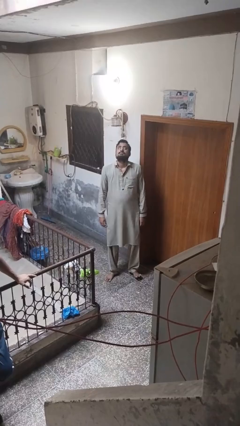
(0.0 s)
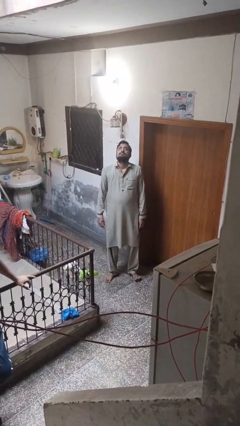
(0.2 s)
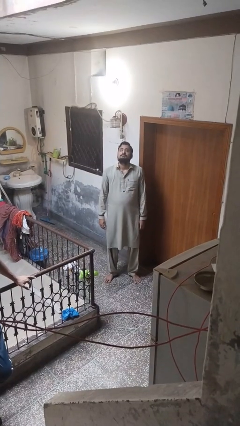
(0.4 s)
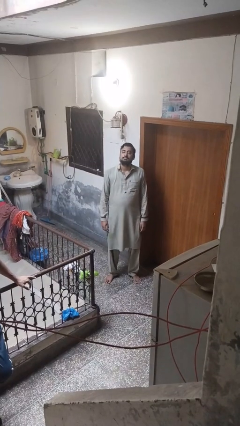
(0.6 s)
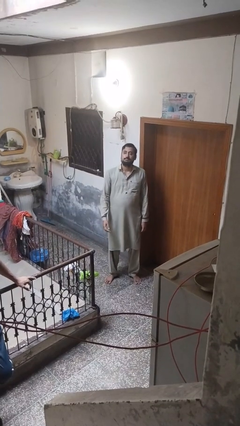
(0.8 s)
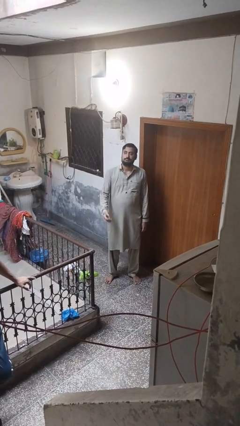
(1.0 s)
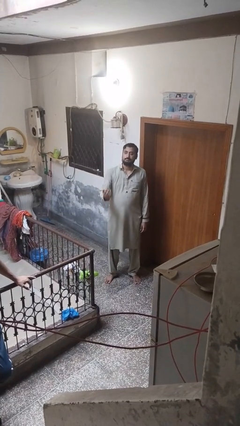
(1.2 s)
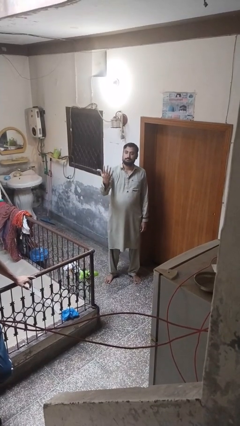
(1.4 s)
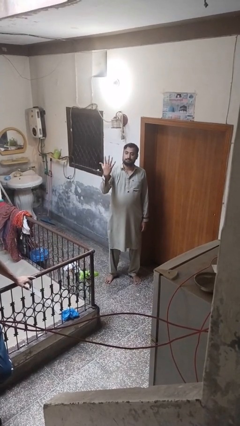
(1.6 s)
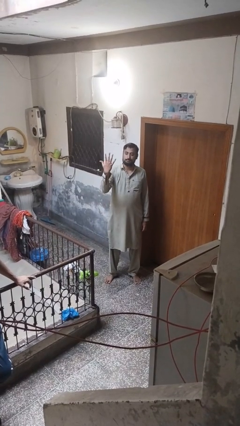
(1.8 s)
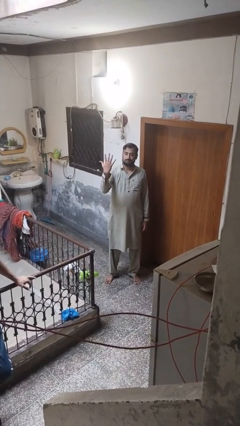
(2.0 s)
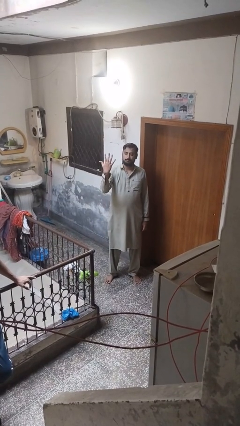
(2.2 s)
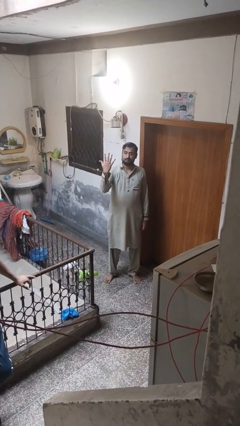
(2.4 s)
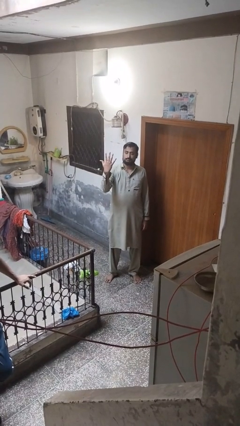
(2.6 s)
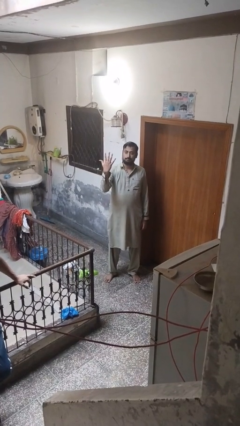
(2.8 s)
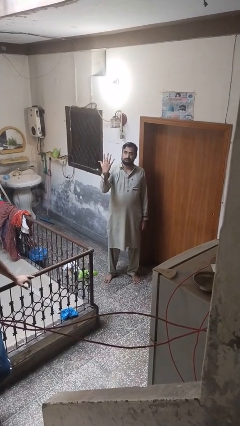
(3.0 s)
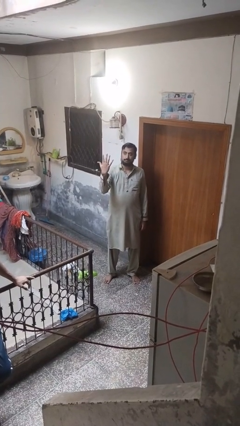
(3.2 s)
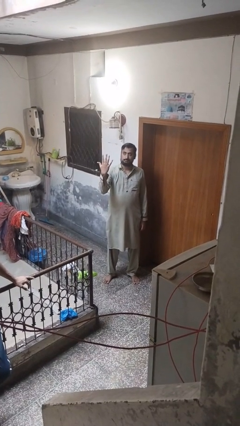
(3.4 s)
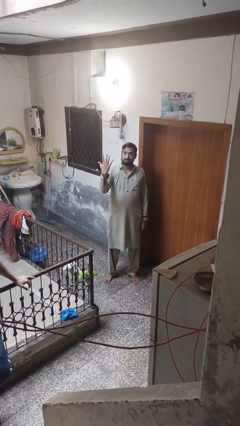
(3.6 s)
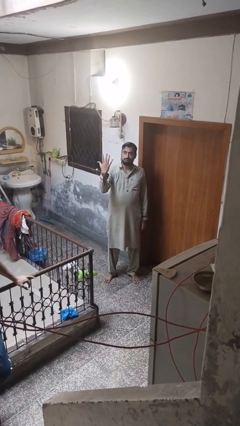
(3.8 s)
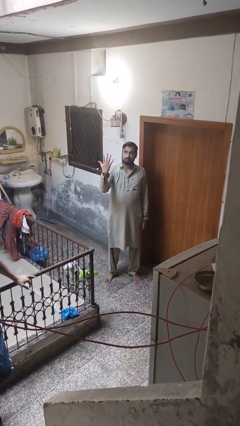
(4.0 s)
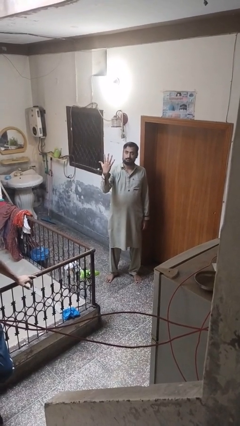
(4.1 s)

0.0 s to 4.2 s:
person gestures number five

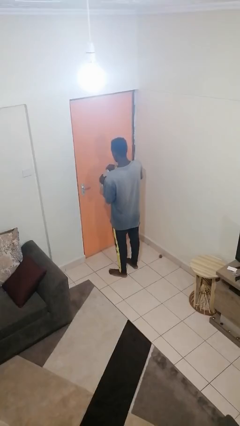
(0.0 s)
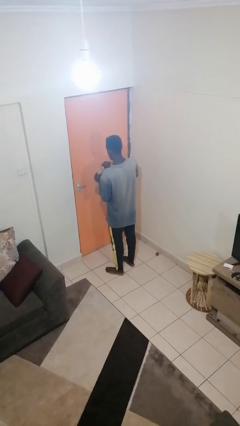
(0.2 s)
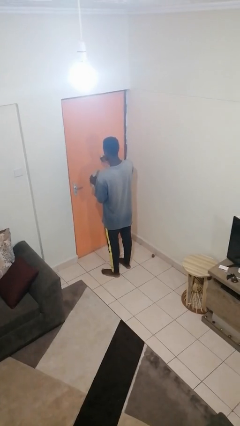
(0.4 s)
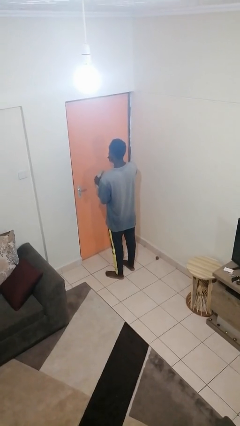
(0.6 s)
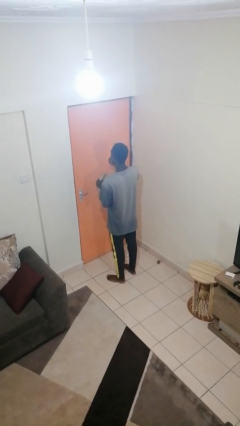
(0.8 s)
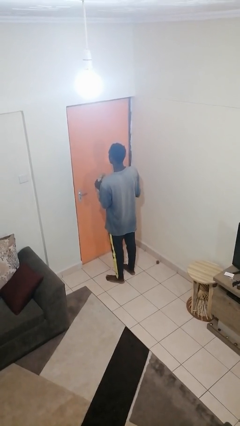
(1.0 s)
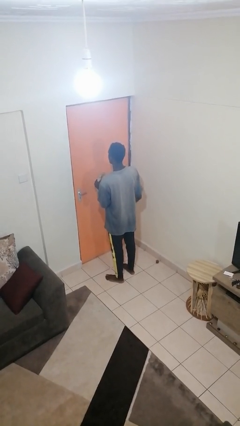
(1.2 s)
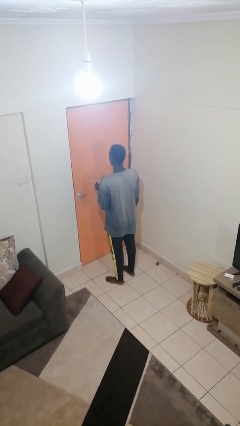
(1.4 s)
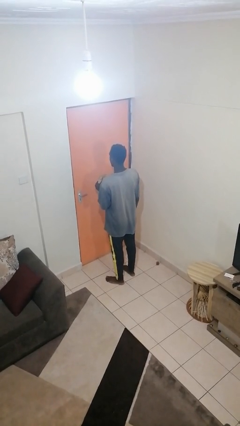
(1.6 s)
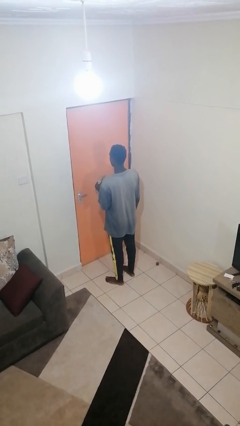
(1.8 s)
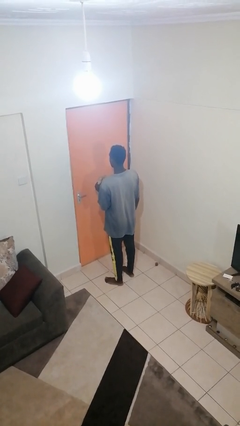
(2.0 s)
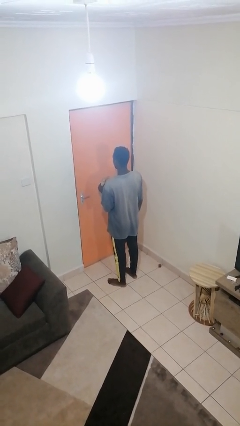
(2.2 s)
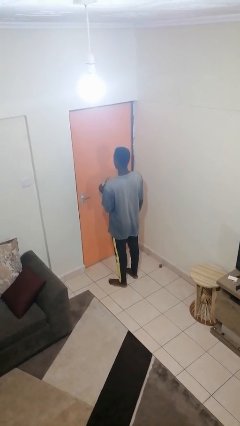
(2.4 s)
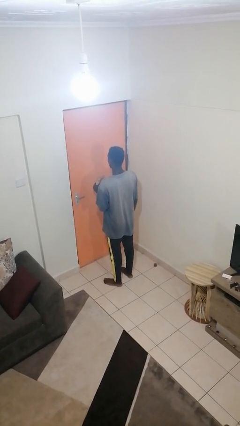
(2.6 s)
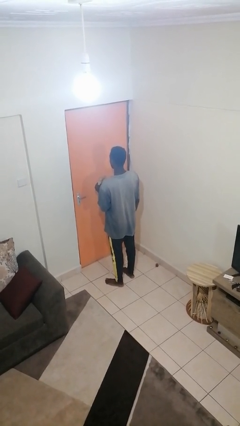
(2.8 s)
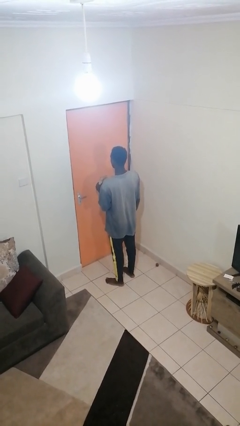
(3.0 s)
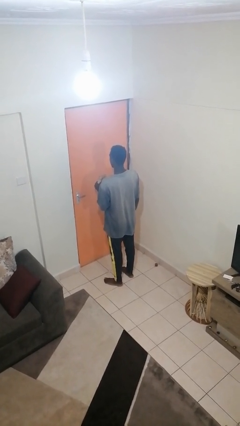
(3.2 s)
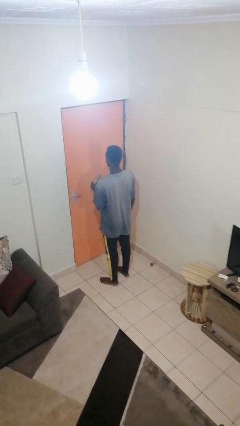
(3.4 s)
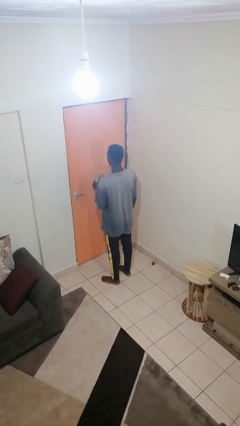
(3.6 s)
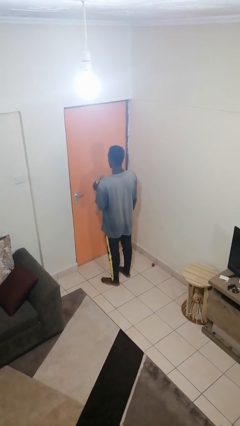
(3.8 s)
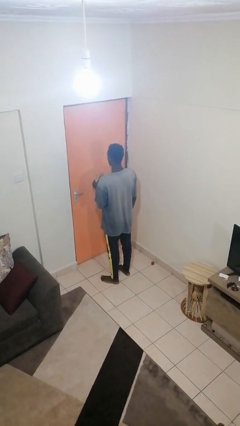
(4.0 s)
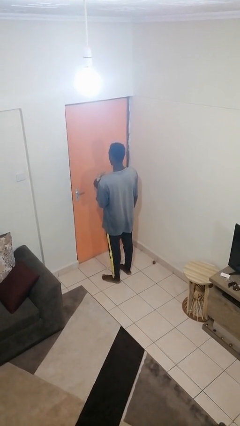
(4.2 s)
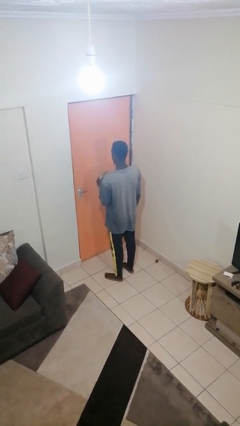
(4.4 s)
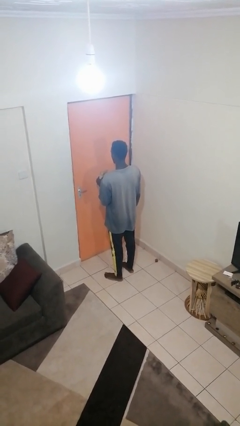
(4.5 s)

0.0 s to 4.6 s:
person eats snack from bag

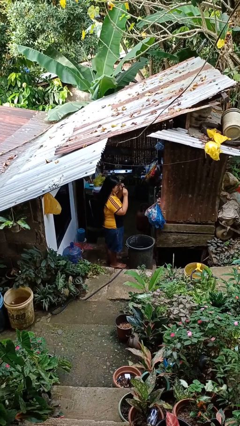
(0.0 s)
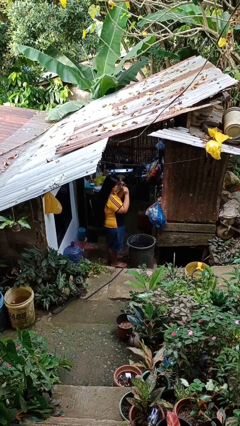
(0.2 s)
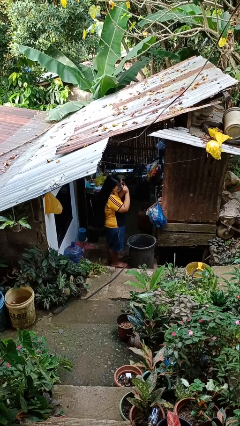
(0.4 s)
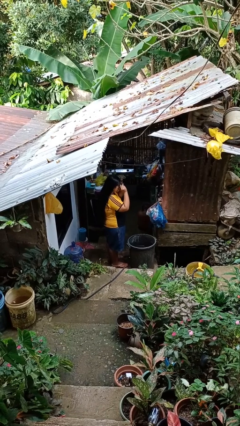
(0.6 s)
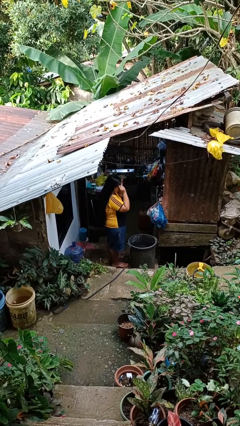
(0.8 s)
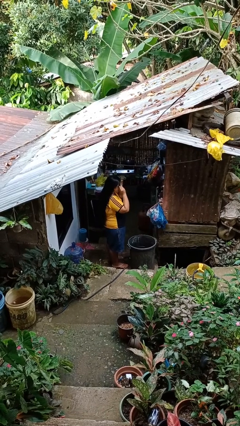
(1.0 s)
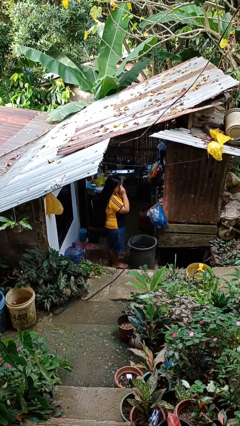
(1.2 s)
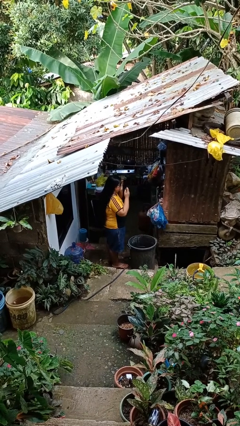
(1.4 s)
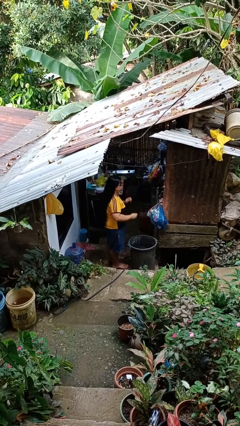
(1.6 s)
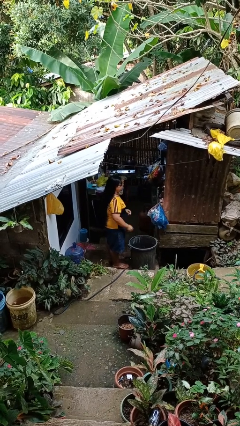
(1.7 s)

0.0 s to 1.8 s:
person puts on sunglasses

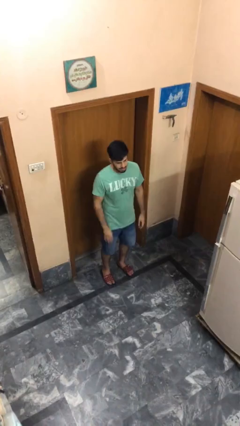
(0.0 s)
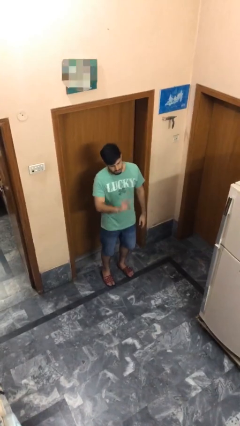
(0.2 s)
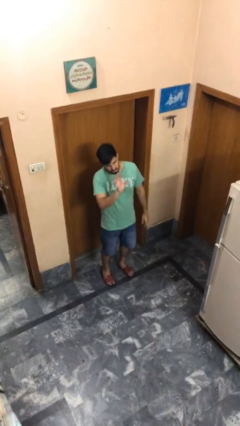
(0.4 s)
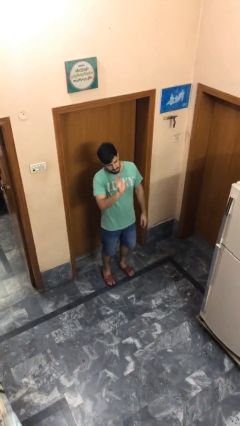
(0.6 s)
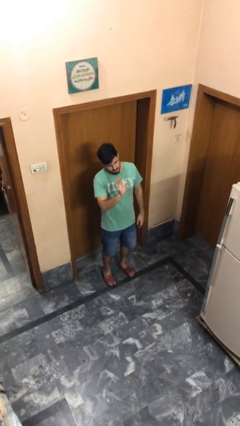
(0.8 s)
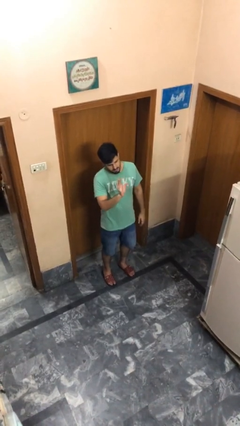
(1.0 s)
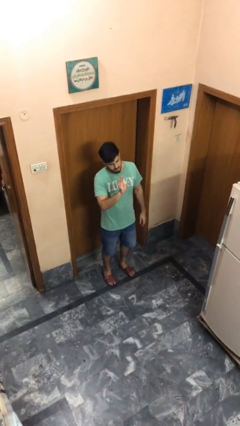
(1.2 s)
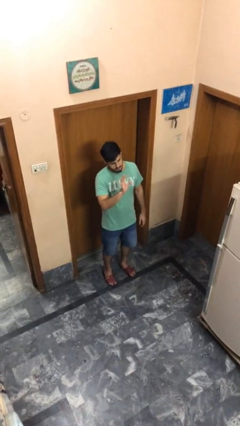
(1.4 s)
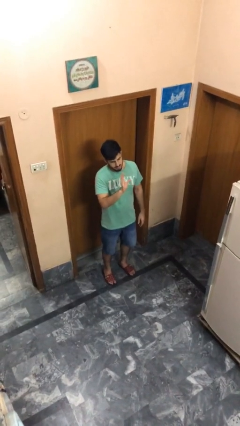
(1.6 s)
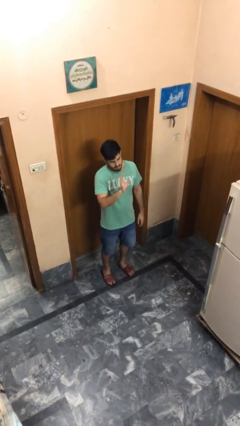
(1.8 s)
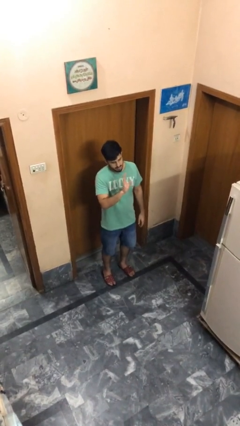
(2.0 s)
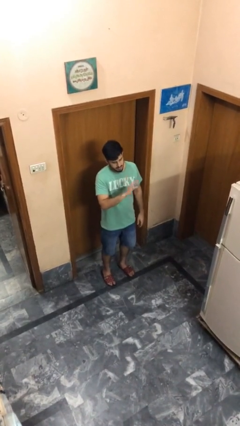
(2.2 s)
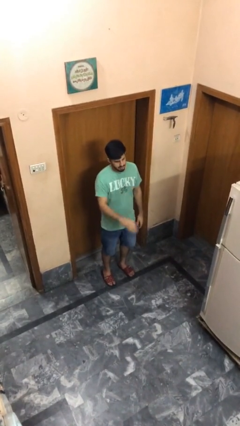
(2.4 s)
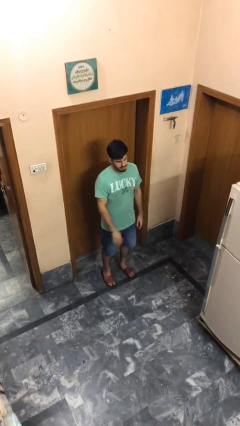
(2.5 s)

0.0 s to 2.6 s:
person waves at person

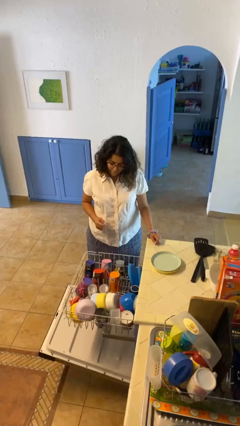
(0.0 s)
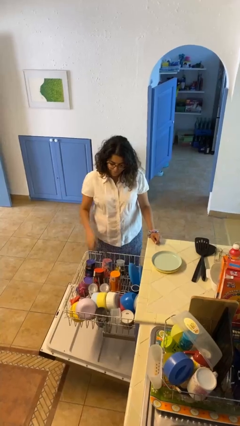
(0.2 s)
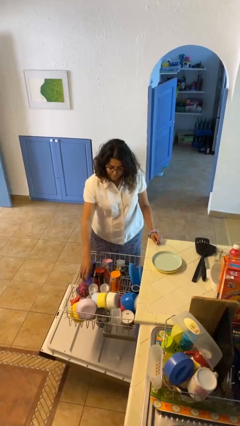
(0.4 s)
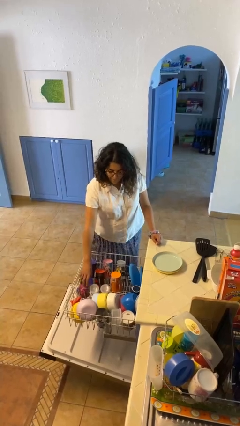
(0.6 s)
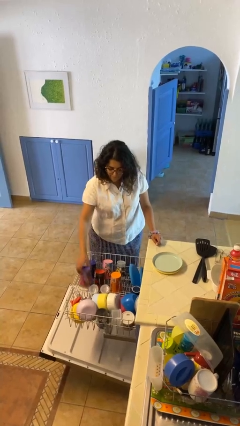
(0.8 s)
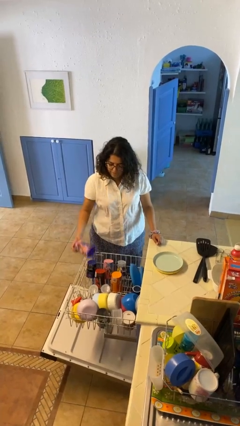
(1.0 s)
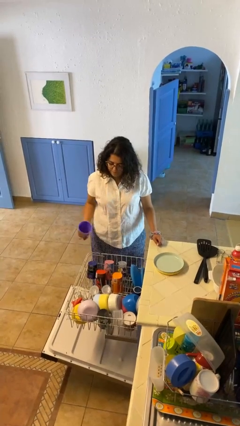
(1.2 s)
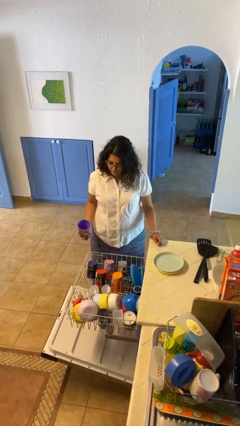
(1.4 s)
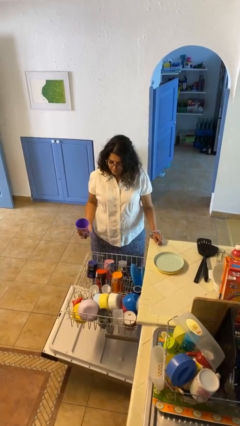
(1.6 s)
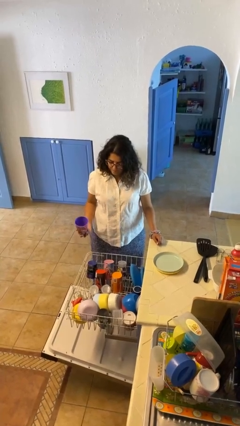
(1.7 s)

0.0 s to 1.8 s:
person unloads dishwasher

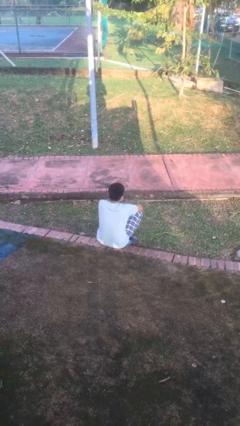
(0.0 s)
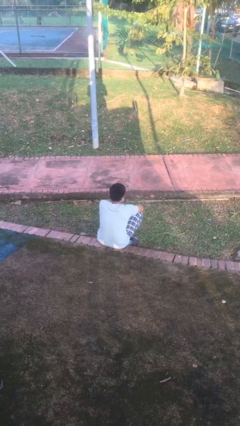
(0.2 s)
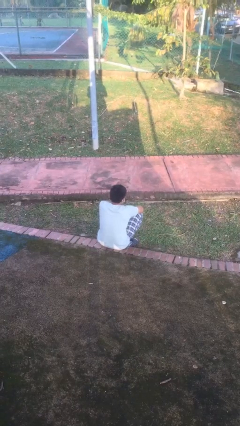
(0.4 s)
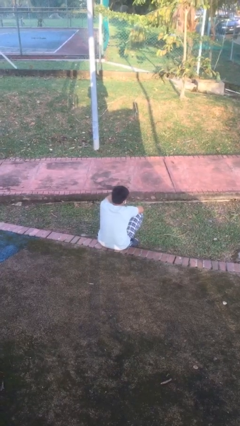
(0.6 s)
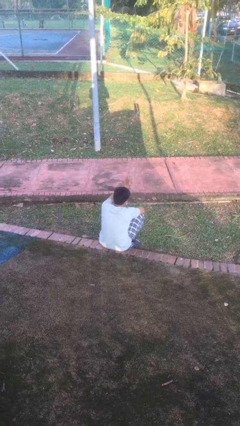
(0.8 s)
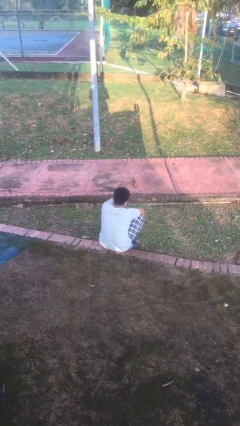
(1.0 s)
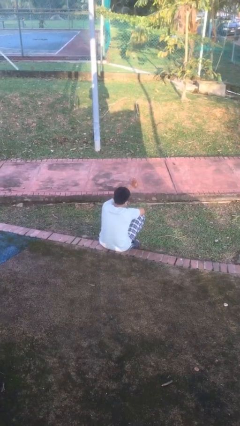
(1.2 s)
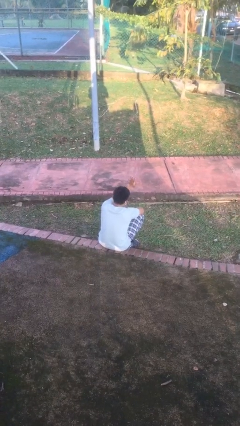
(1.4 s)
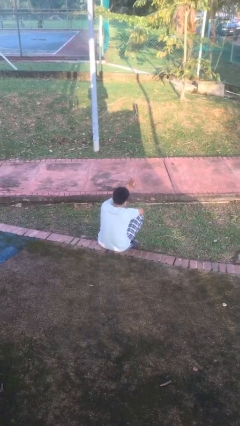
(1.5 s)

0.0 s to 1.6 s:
person gestures stop

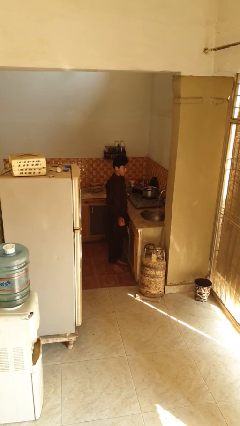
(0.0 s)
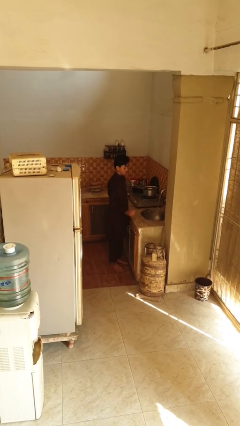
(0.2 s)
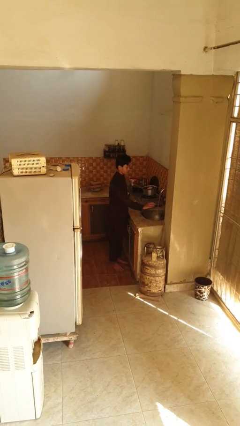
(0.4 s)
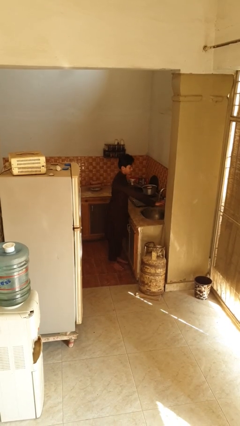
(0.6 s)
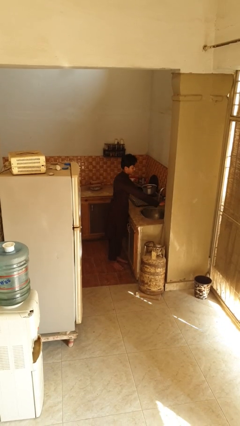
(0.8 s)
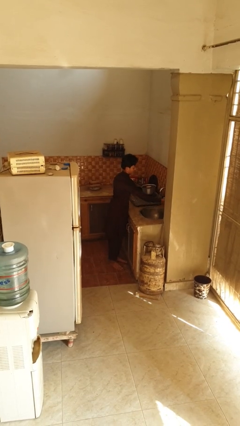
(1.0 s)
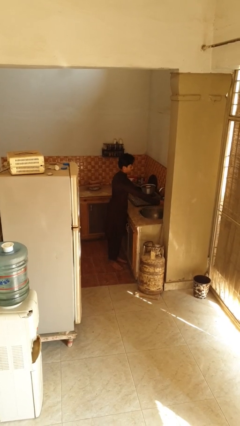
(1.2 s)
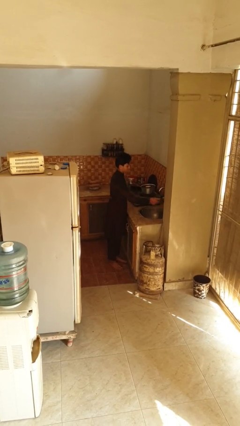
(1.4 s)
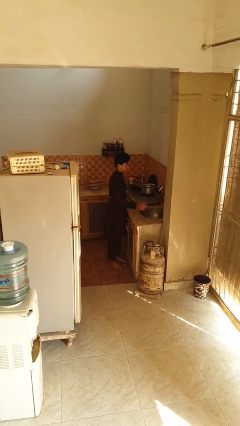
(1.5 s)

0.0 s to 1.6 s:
person turns off faucet
